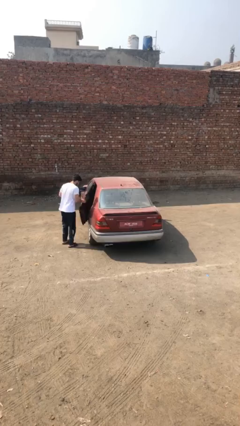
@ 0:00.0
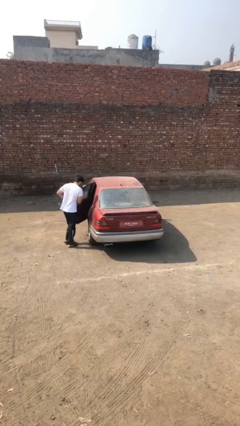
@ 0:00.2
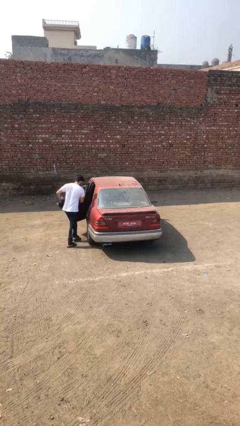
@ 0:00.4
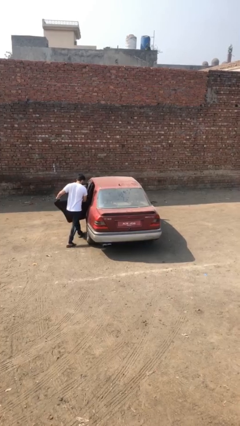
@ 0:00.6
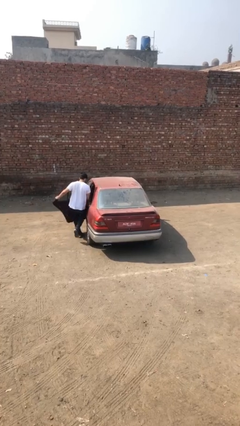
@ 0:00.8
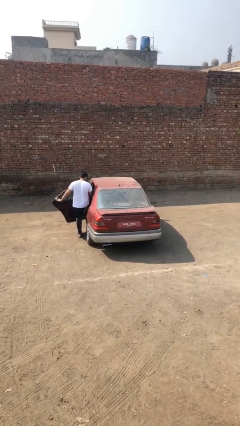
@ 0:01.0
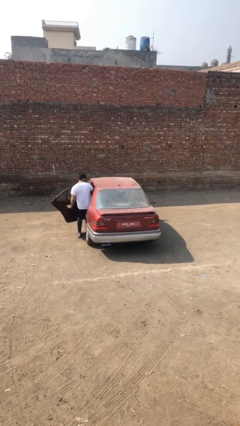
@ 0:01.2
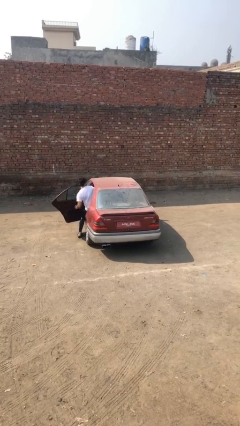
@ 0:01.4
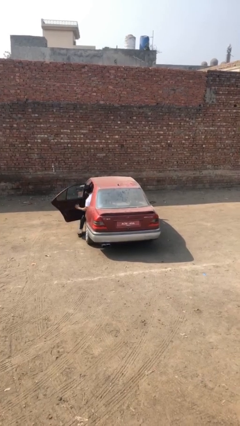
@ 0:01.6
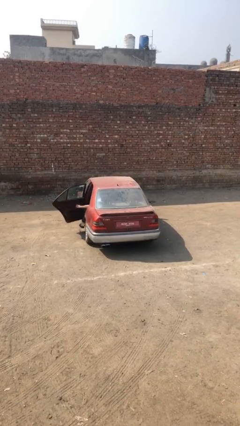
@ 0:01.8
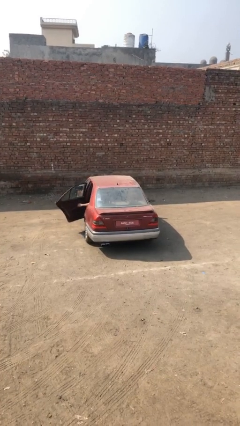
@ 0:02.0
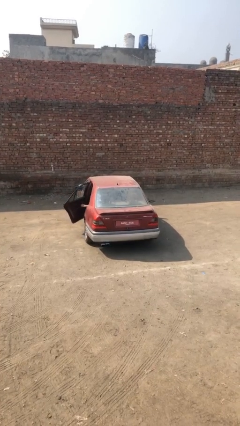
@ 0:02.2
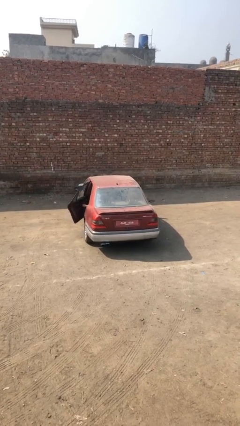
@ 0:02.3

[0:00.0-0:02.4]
car picks up person

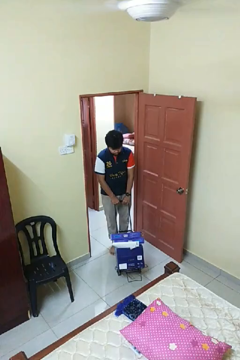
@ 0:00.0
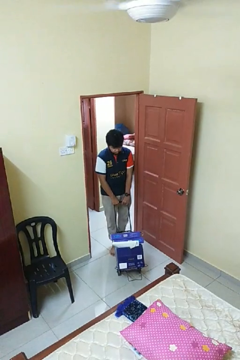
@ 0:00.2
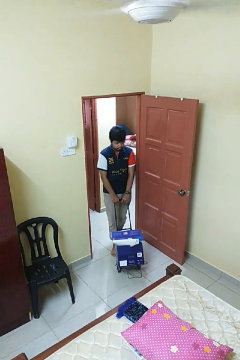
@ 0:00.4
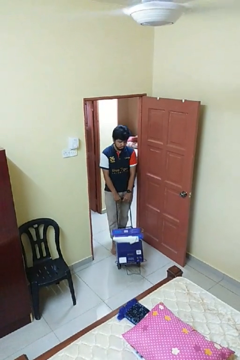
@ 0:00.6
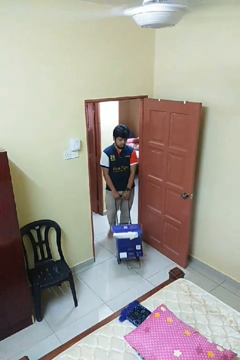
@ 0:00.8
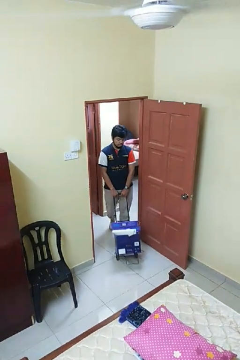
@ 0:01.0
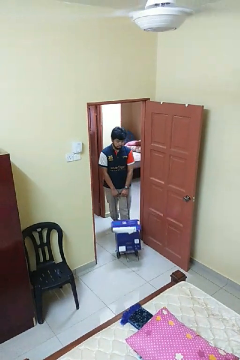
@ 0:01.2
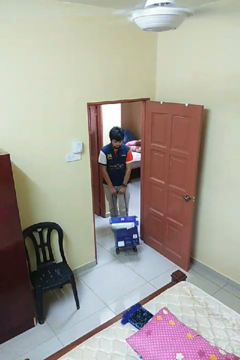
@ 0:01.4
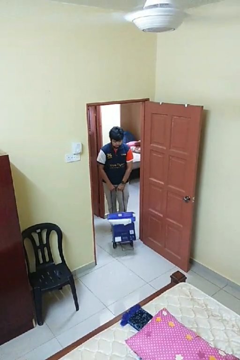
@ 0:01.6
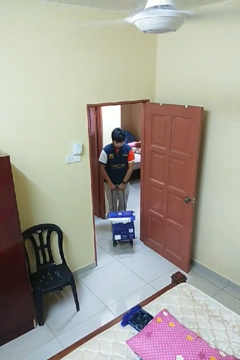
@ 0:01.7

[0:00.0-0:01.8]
person pulls wheeled cart

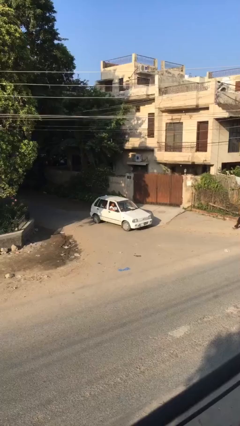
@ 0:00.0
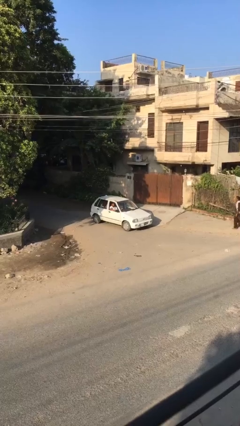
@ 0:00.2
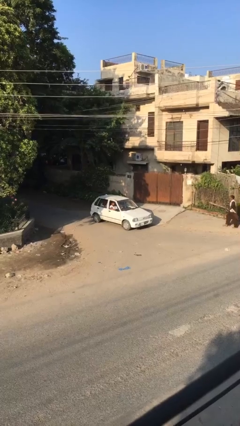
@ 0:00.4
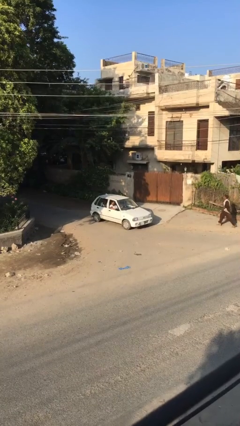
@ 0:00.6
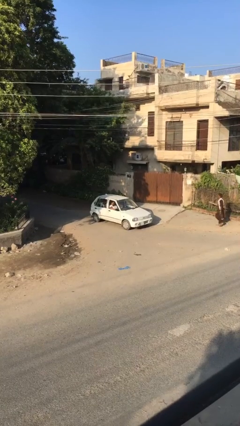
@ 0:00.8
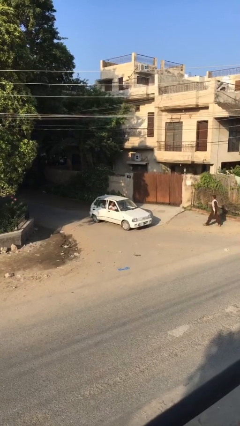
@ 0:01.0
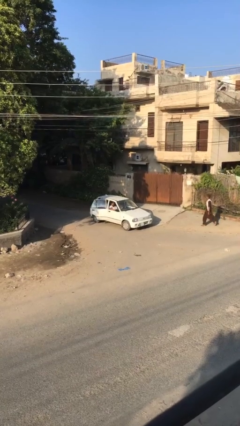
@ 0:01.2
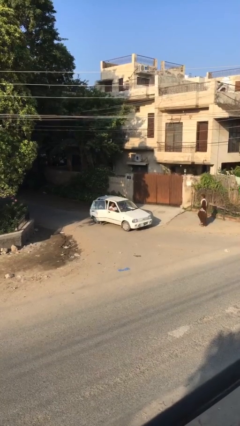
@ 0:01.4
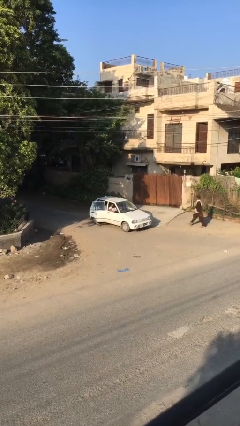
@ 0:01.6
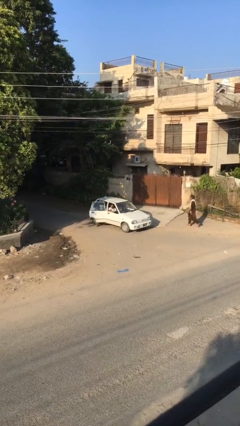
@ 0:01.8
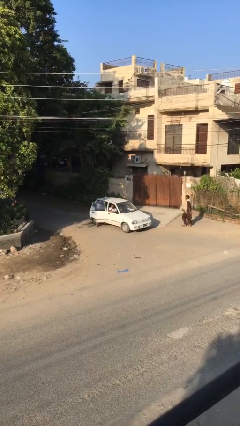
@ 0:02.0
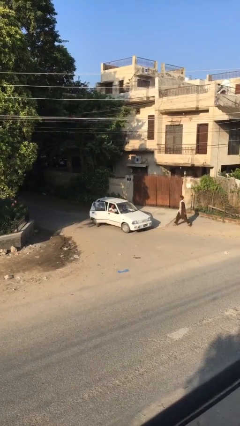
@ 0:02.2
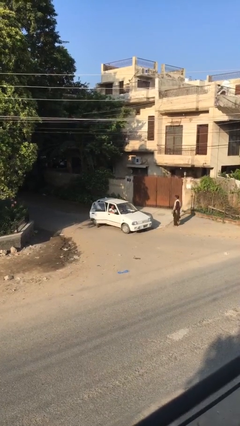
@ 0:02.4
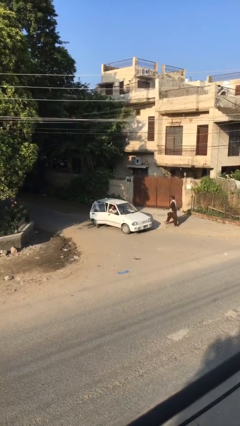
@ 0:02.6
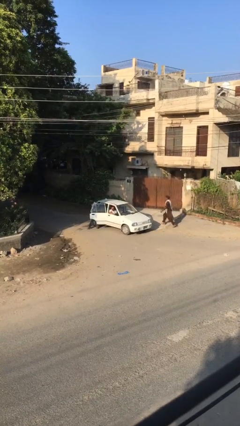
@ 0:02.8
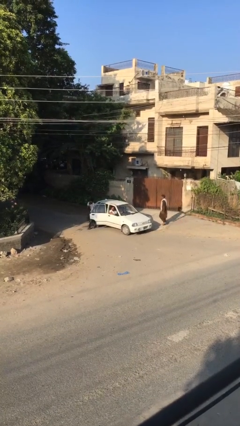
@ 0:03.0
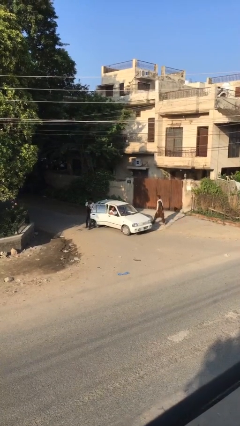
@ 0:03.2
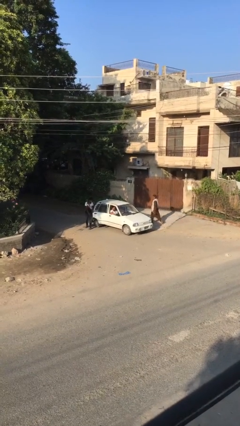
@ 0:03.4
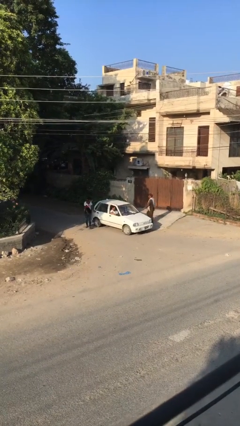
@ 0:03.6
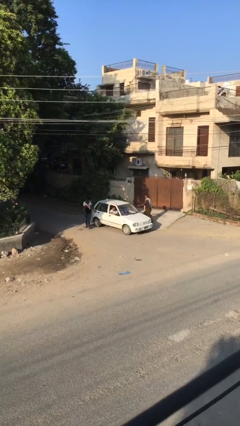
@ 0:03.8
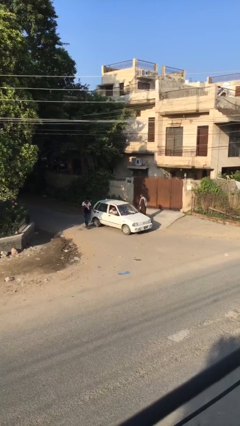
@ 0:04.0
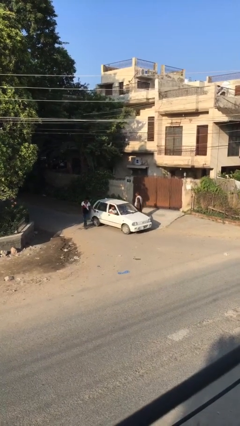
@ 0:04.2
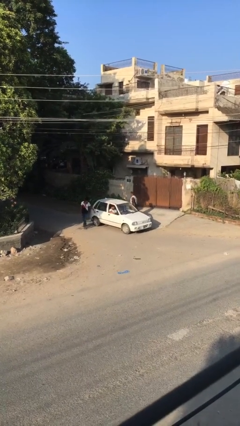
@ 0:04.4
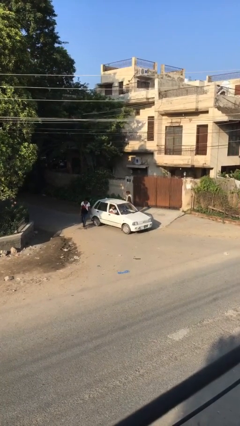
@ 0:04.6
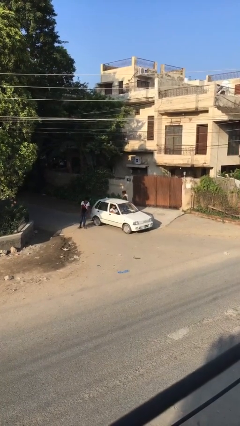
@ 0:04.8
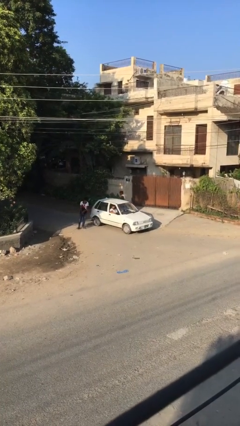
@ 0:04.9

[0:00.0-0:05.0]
car drops off person

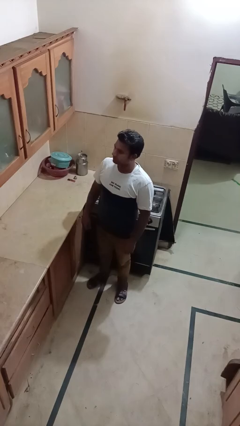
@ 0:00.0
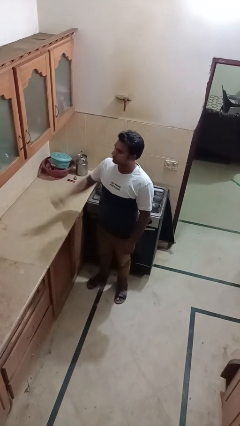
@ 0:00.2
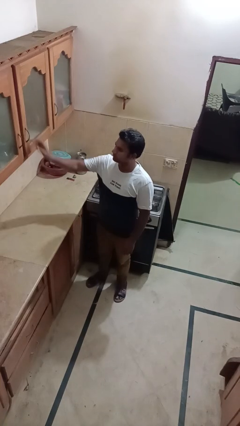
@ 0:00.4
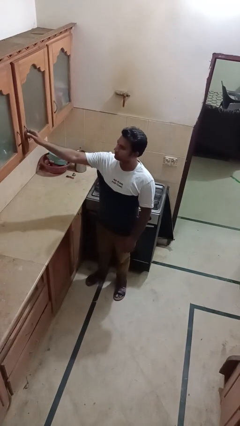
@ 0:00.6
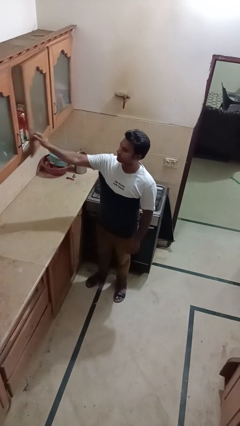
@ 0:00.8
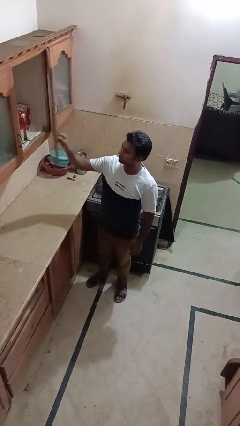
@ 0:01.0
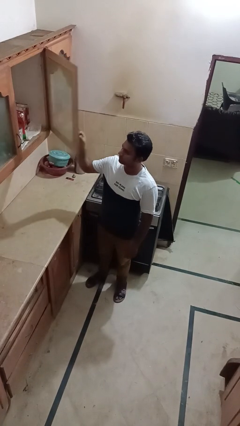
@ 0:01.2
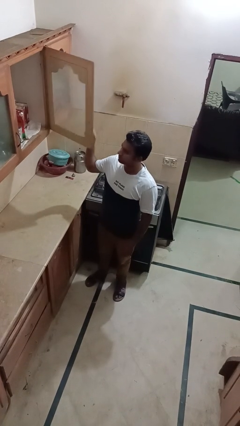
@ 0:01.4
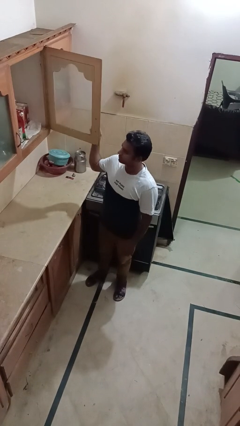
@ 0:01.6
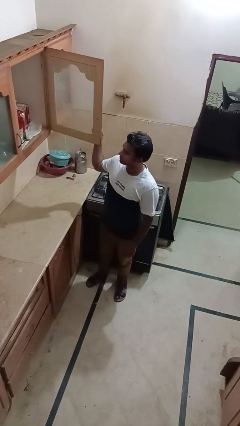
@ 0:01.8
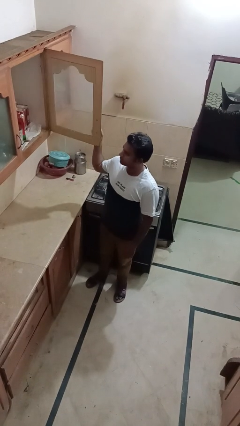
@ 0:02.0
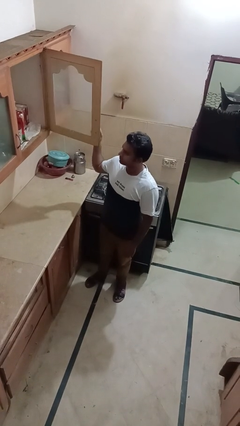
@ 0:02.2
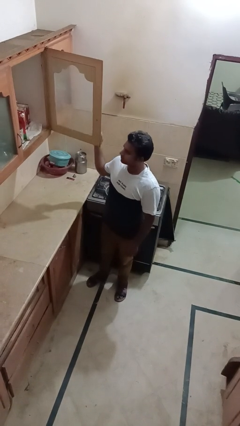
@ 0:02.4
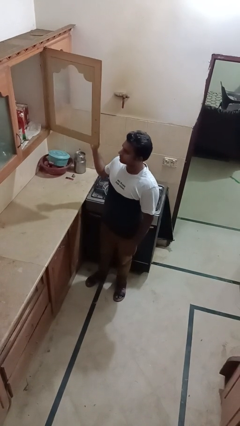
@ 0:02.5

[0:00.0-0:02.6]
person opens cabinet

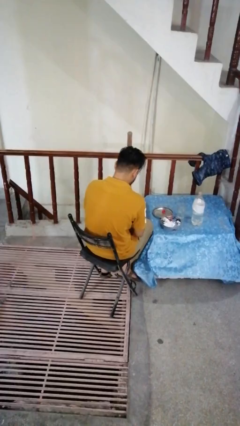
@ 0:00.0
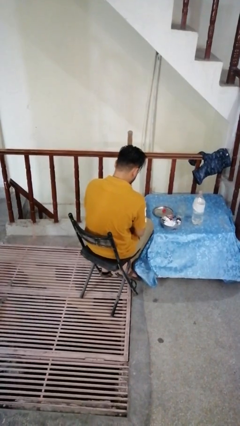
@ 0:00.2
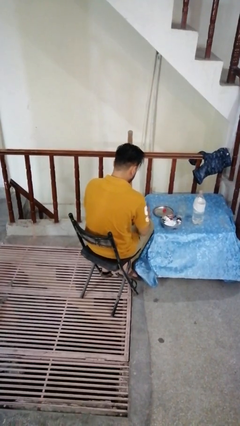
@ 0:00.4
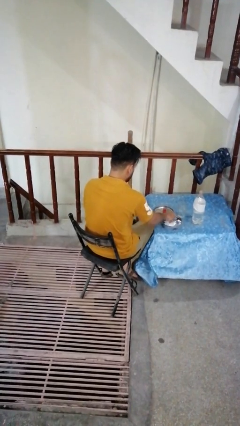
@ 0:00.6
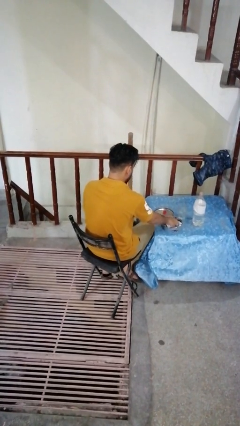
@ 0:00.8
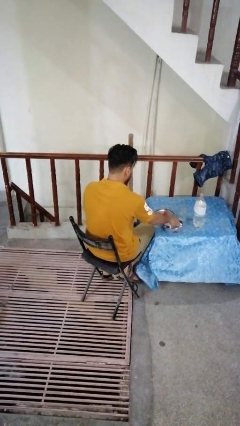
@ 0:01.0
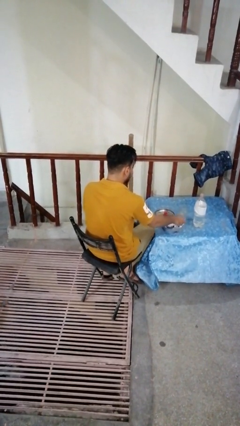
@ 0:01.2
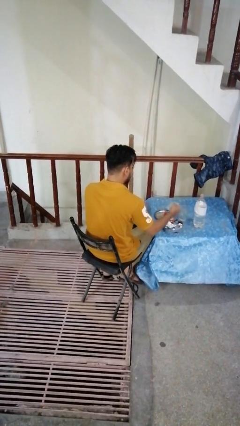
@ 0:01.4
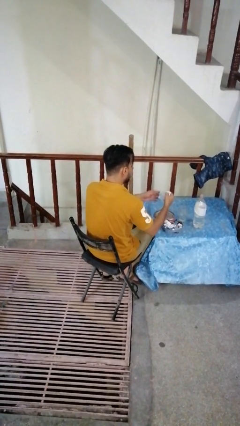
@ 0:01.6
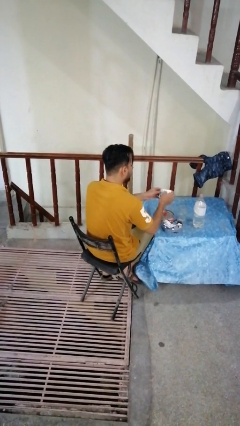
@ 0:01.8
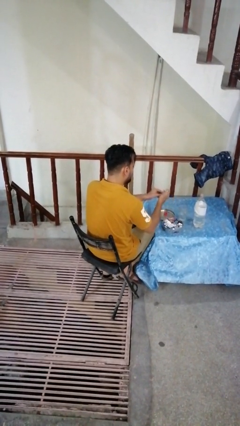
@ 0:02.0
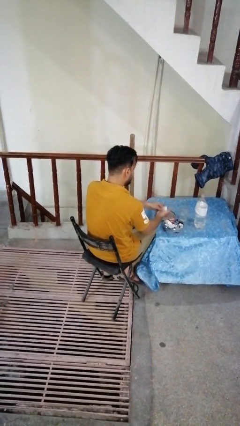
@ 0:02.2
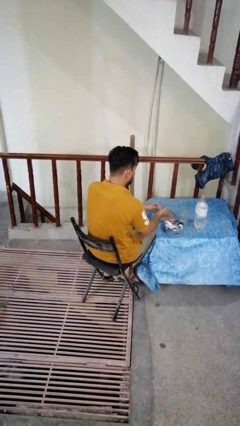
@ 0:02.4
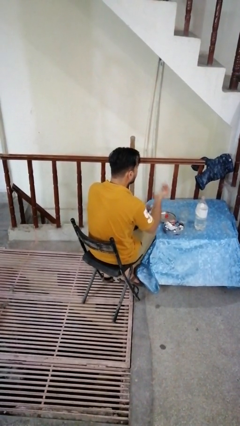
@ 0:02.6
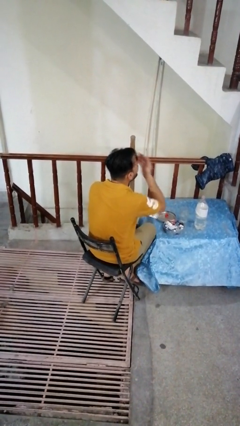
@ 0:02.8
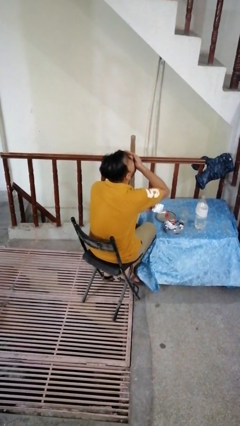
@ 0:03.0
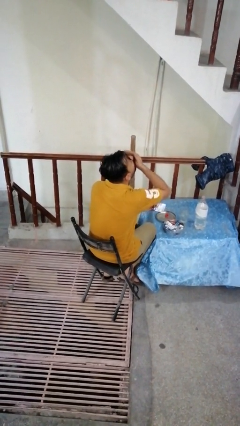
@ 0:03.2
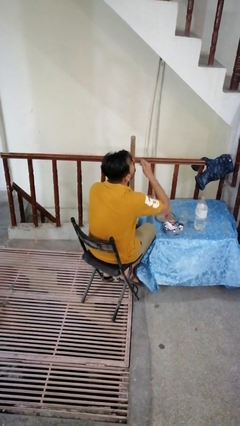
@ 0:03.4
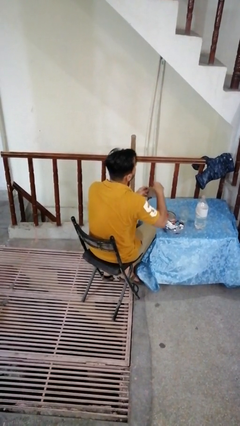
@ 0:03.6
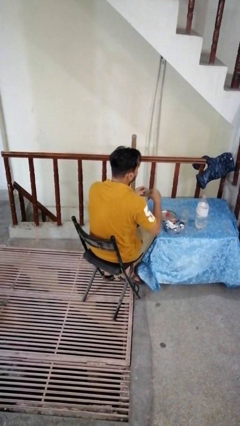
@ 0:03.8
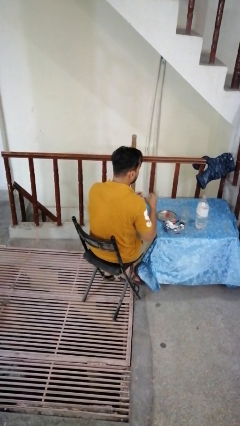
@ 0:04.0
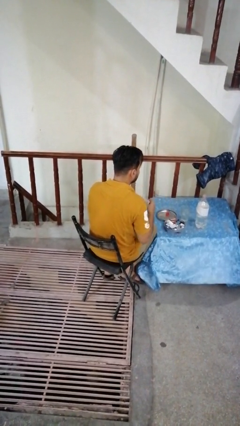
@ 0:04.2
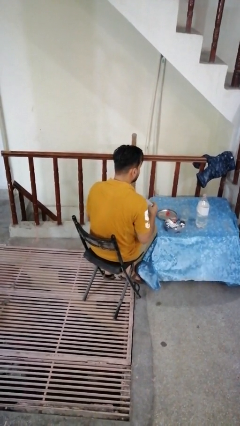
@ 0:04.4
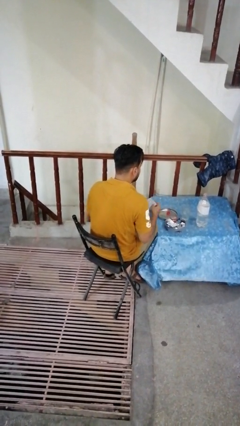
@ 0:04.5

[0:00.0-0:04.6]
person takes medicine pills

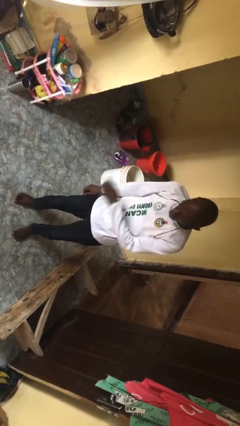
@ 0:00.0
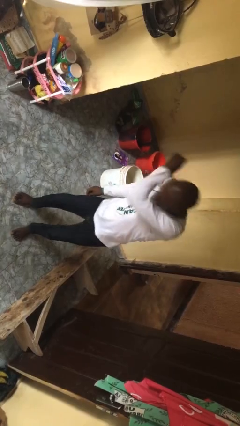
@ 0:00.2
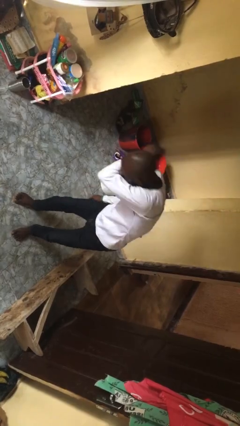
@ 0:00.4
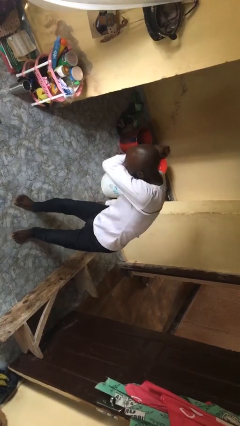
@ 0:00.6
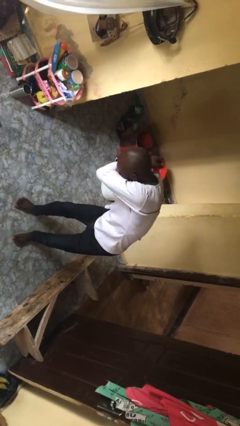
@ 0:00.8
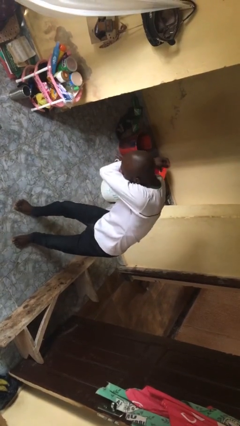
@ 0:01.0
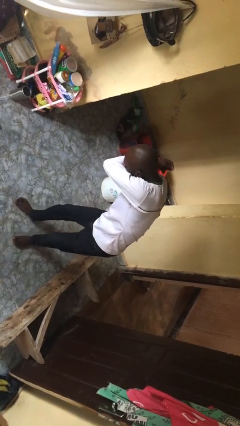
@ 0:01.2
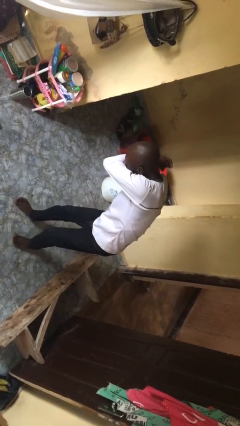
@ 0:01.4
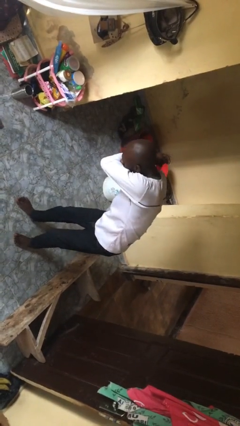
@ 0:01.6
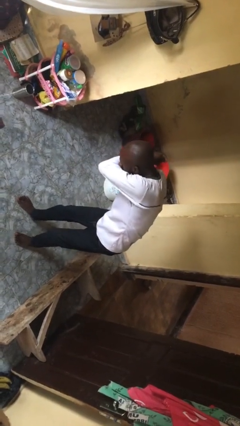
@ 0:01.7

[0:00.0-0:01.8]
person sneezes into arm
